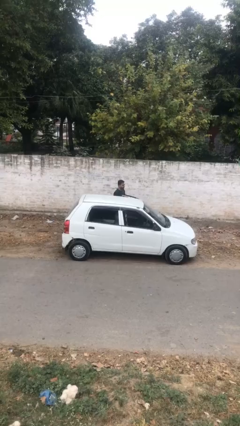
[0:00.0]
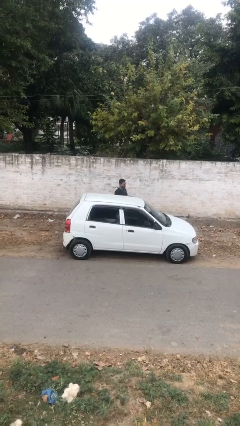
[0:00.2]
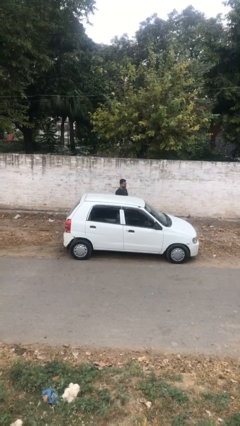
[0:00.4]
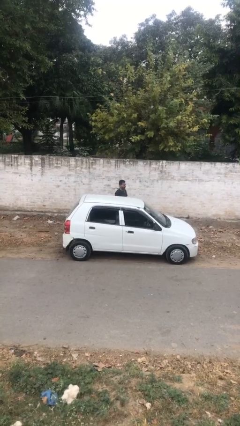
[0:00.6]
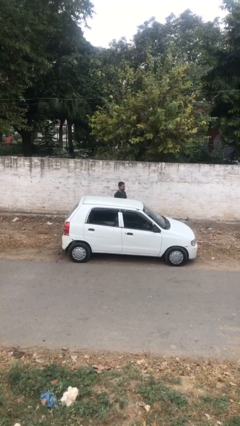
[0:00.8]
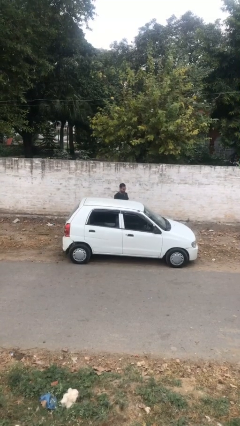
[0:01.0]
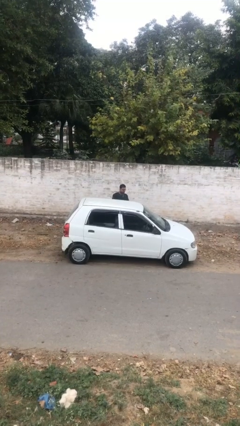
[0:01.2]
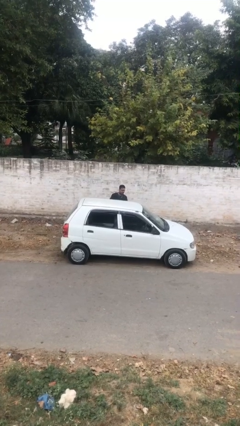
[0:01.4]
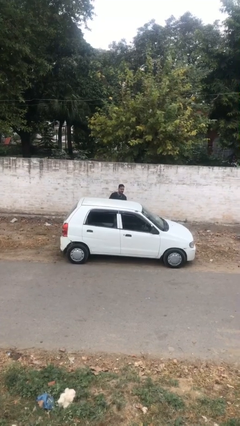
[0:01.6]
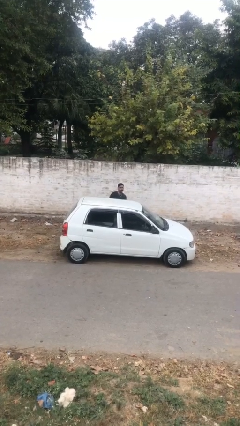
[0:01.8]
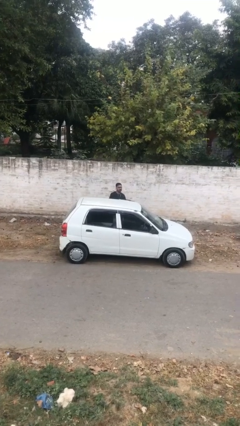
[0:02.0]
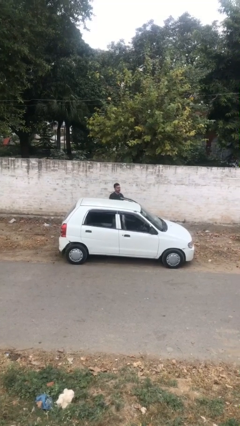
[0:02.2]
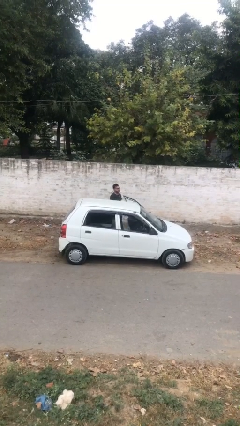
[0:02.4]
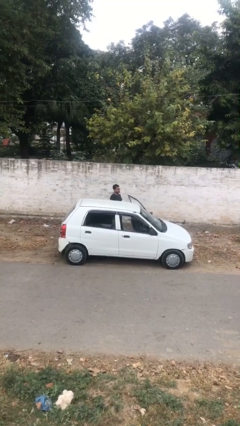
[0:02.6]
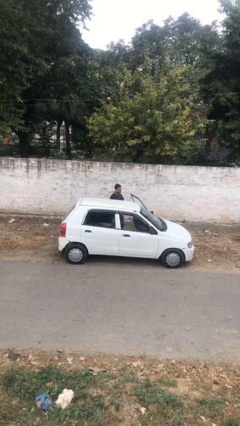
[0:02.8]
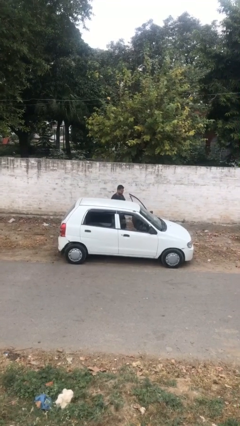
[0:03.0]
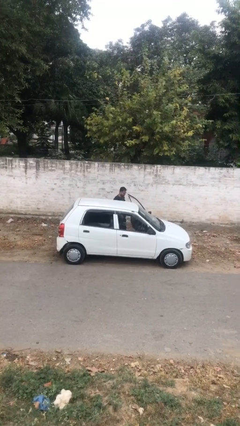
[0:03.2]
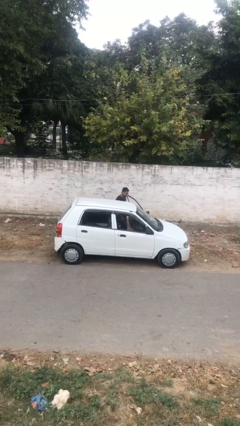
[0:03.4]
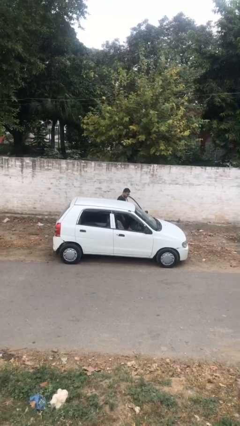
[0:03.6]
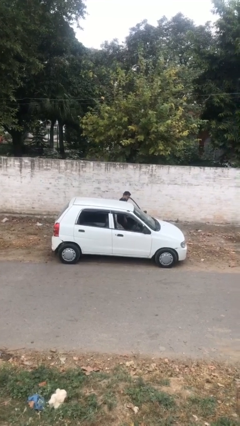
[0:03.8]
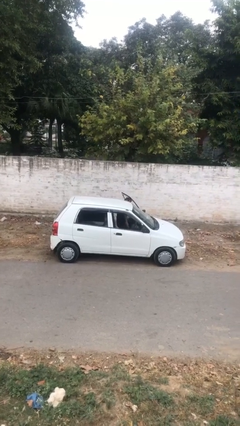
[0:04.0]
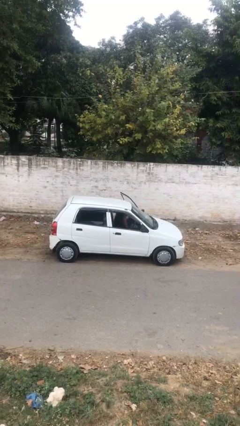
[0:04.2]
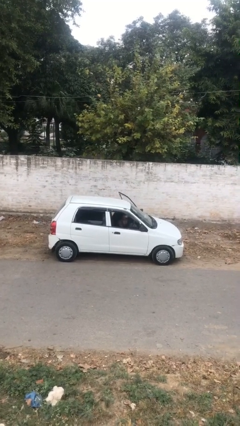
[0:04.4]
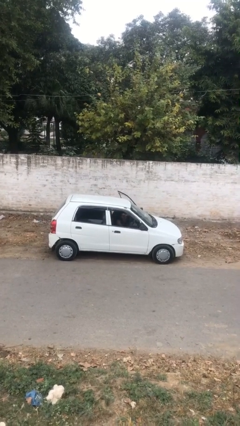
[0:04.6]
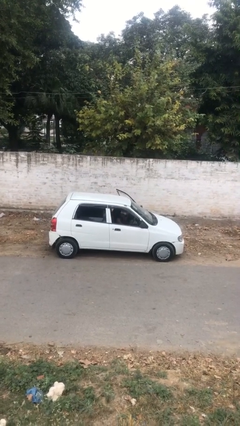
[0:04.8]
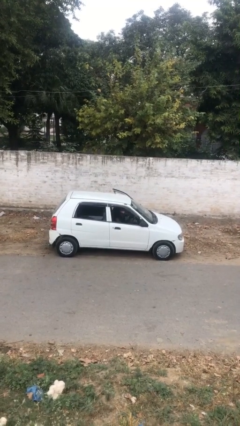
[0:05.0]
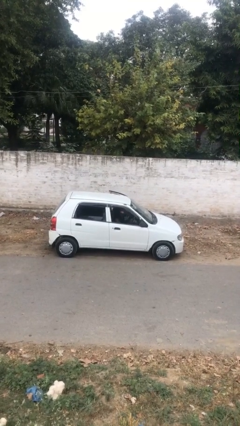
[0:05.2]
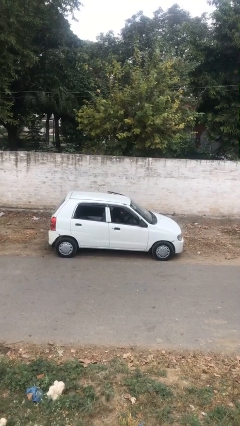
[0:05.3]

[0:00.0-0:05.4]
person enters car

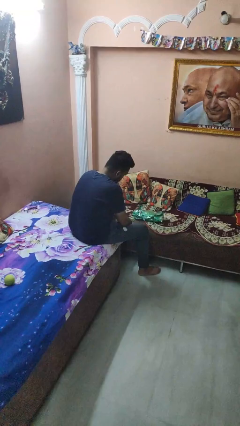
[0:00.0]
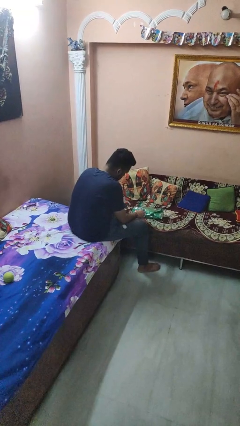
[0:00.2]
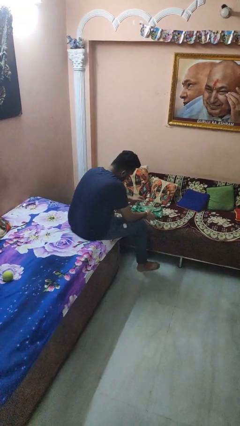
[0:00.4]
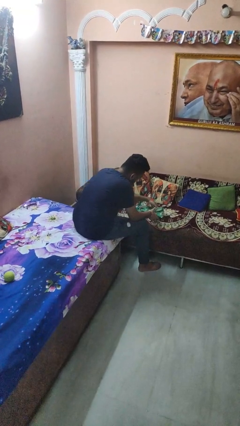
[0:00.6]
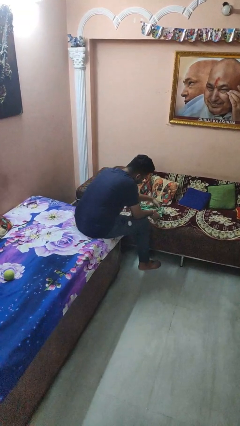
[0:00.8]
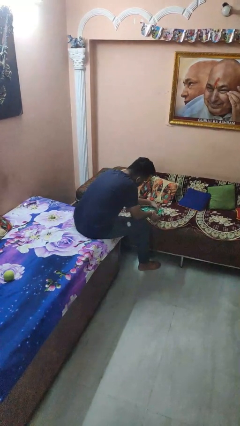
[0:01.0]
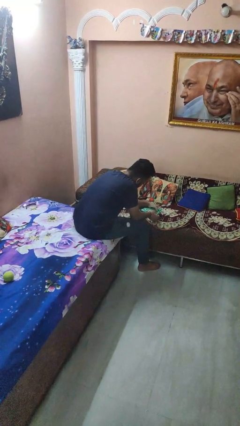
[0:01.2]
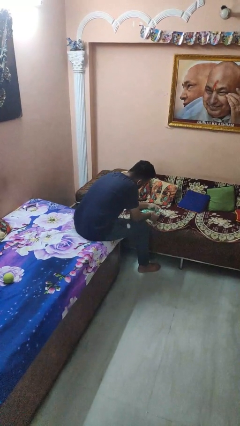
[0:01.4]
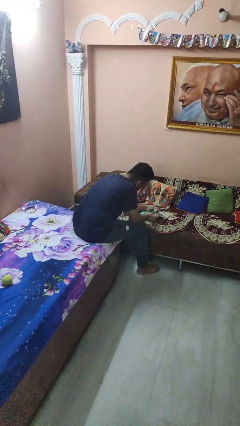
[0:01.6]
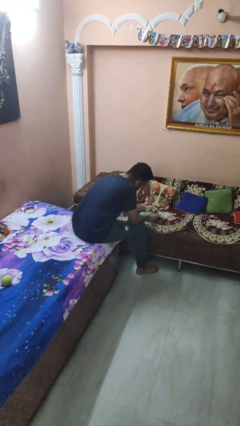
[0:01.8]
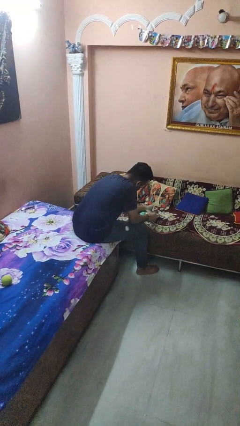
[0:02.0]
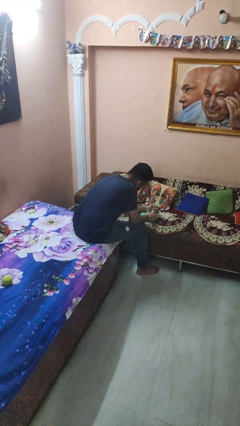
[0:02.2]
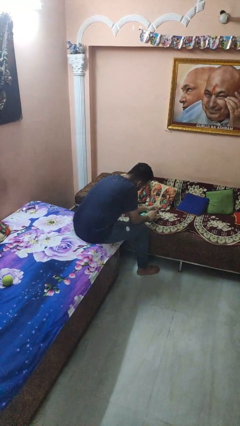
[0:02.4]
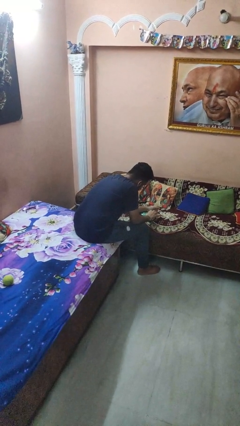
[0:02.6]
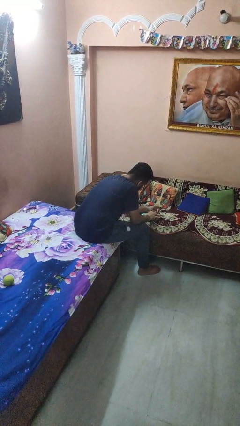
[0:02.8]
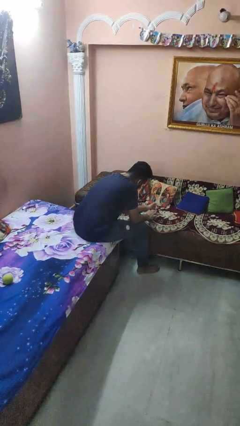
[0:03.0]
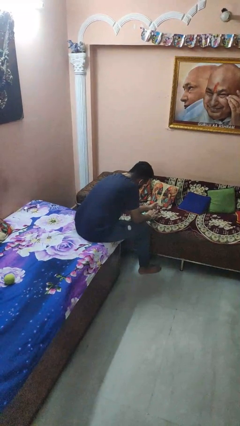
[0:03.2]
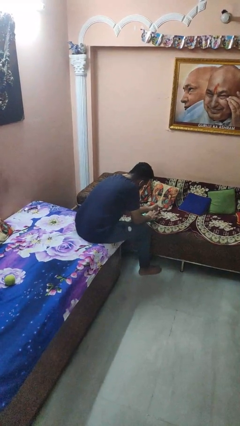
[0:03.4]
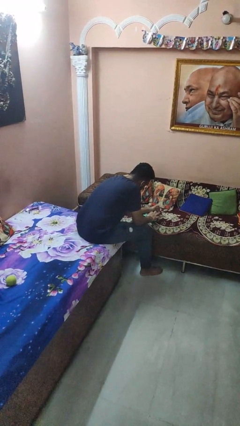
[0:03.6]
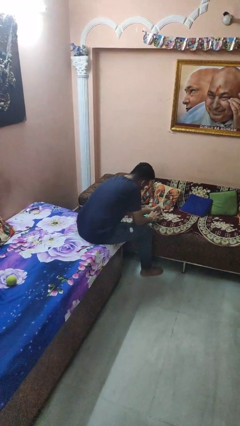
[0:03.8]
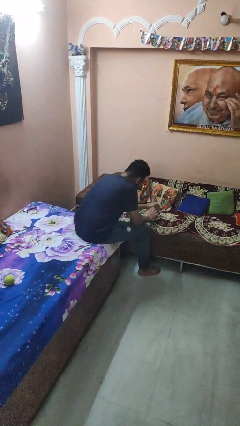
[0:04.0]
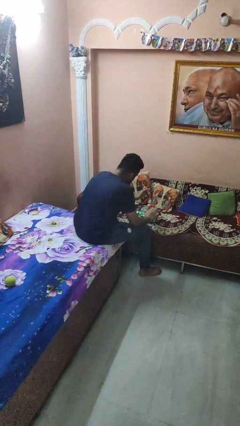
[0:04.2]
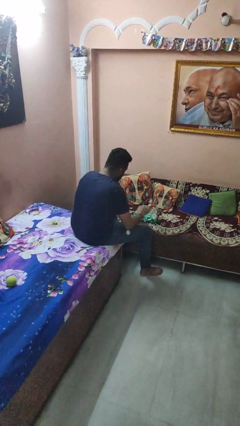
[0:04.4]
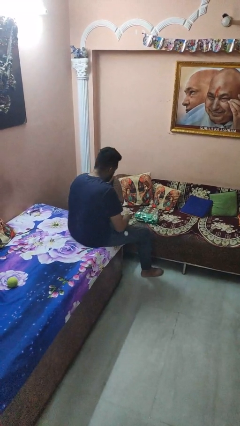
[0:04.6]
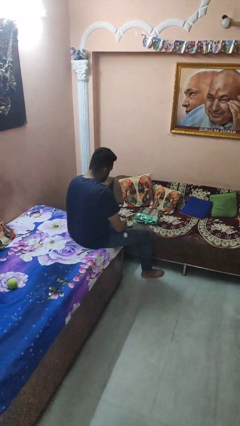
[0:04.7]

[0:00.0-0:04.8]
person wraps box

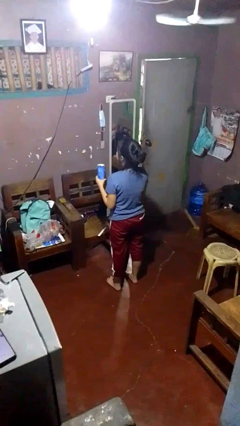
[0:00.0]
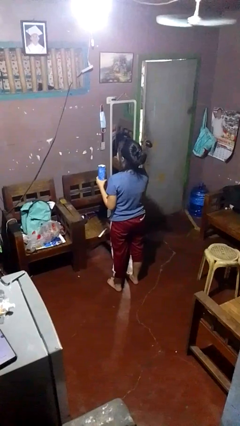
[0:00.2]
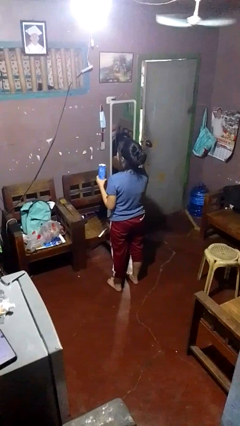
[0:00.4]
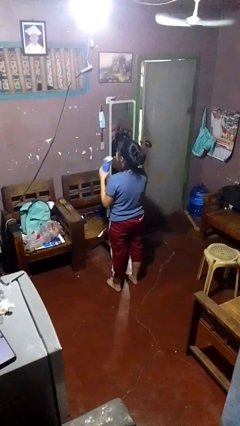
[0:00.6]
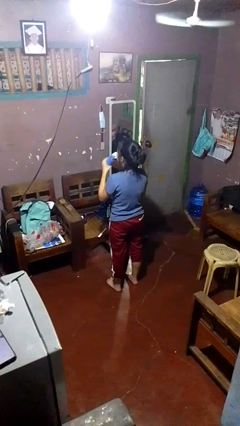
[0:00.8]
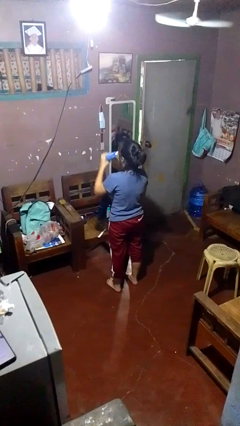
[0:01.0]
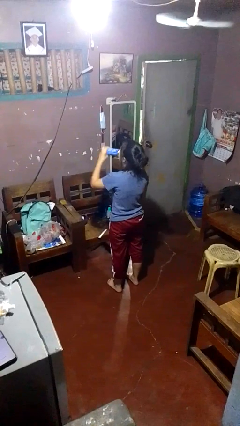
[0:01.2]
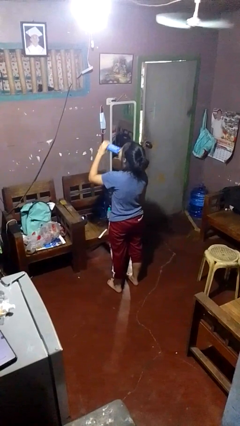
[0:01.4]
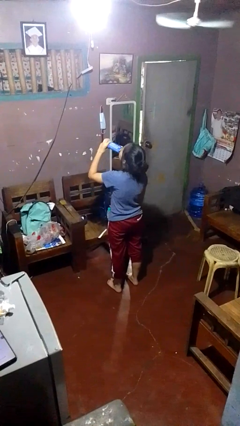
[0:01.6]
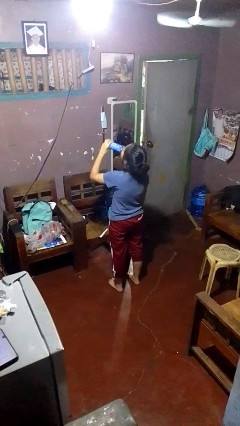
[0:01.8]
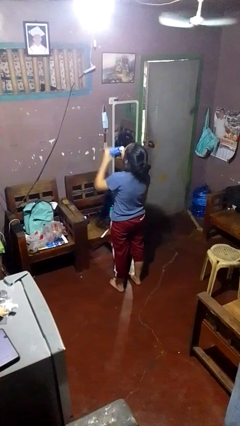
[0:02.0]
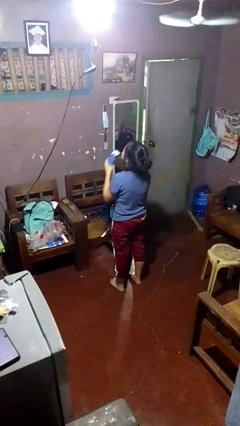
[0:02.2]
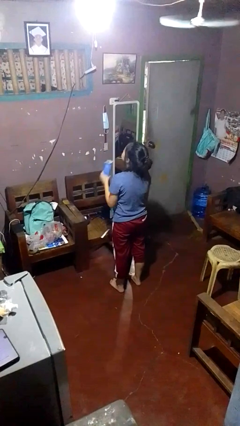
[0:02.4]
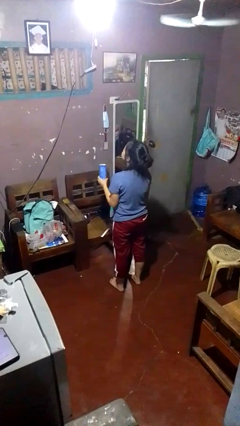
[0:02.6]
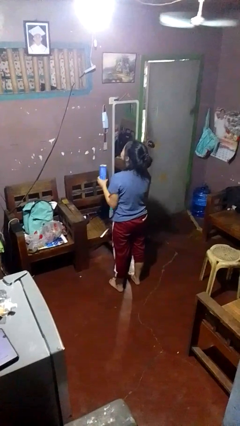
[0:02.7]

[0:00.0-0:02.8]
person drinks from beverage can

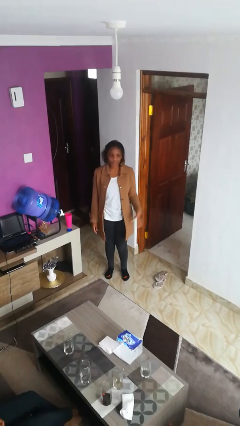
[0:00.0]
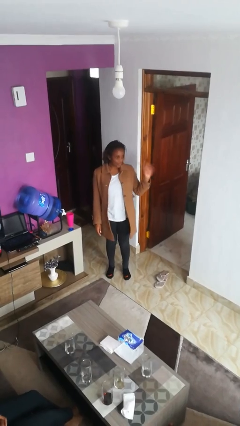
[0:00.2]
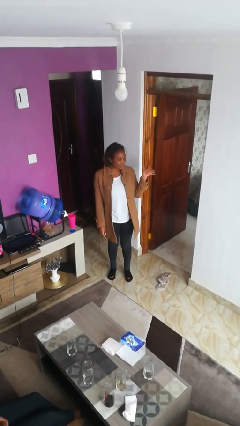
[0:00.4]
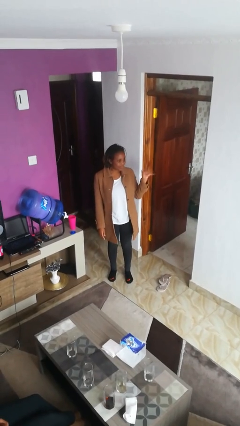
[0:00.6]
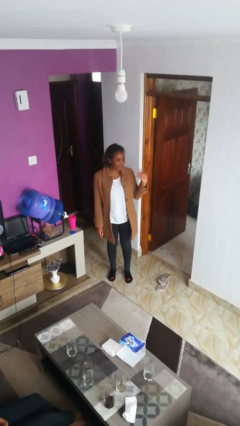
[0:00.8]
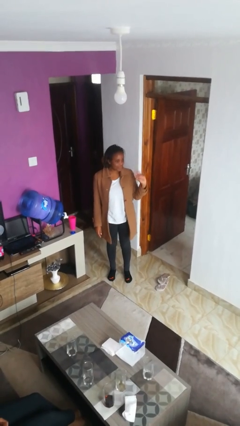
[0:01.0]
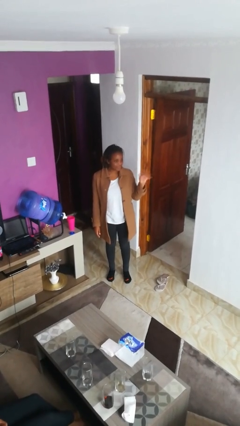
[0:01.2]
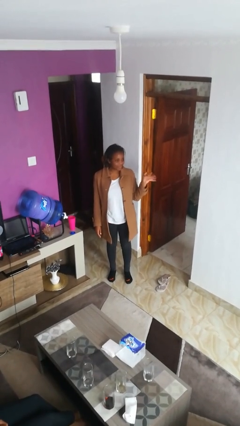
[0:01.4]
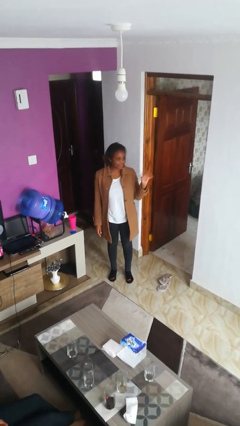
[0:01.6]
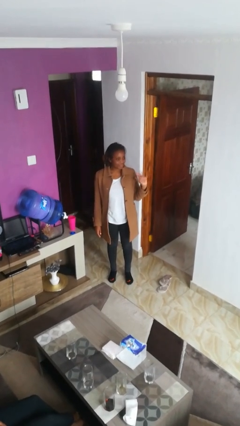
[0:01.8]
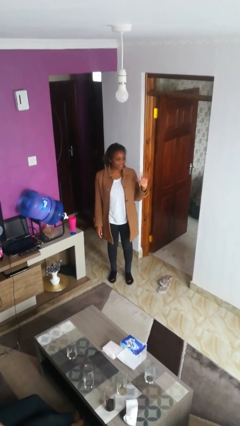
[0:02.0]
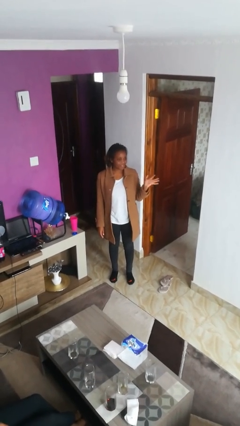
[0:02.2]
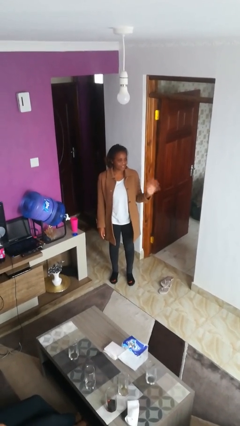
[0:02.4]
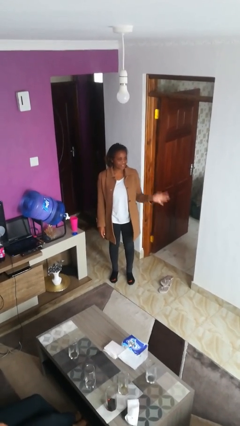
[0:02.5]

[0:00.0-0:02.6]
person waves at person

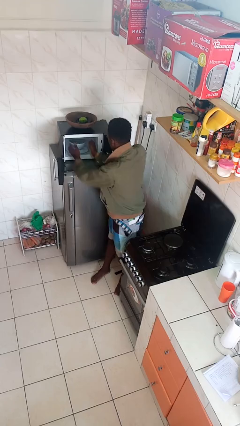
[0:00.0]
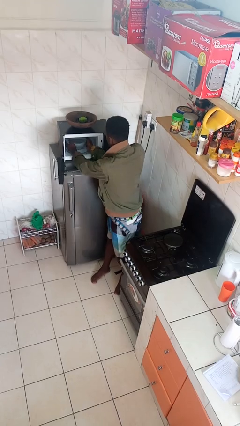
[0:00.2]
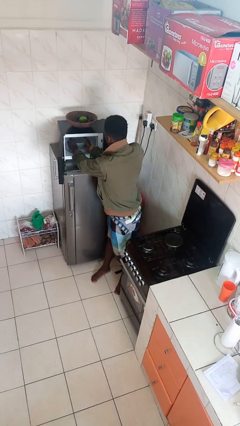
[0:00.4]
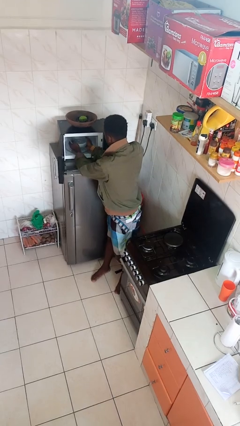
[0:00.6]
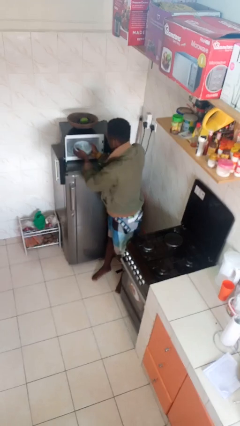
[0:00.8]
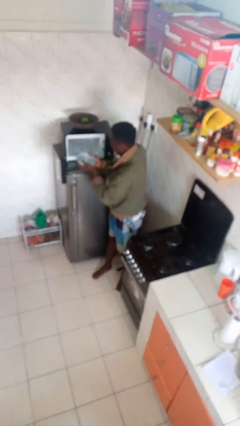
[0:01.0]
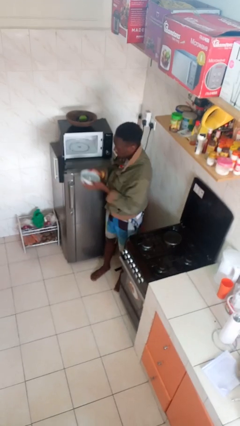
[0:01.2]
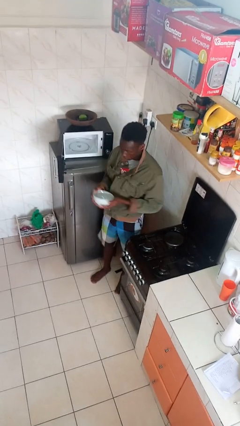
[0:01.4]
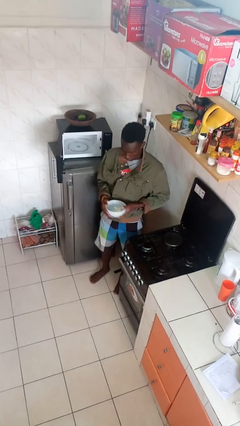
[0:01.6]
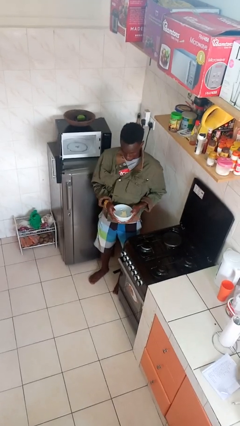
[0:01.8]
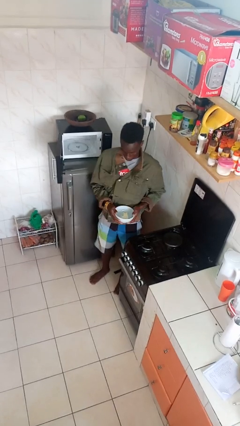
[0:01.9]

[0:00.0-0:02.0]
person takes object from microwave
